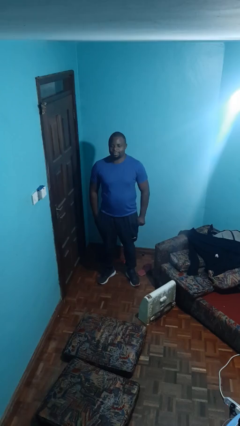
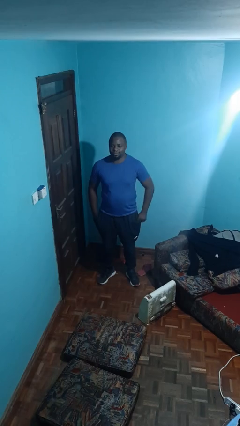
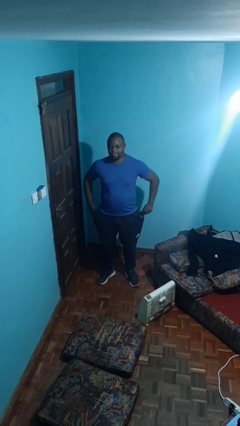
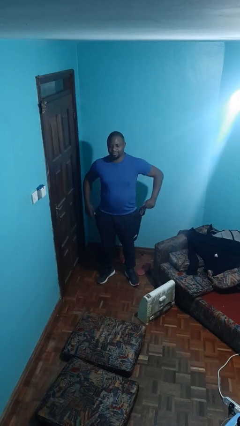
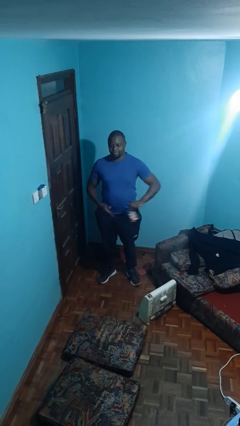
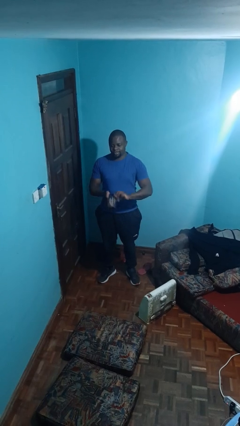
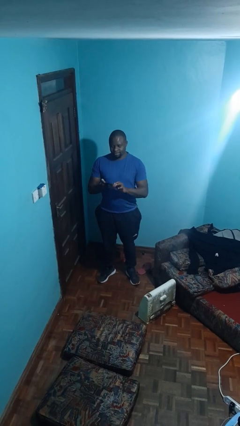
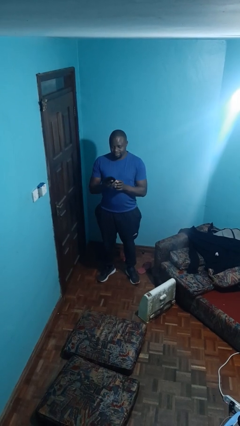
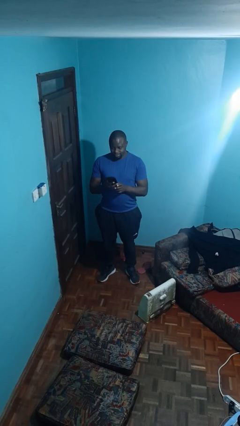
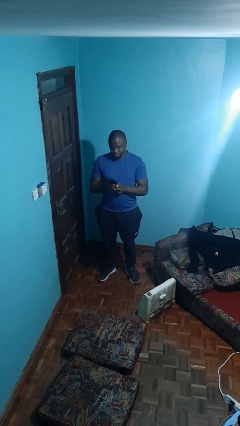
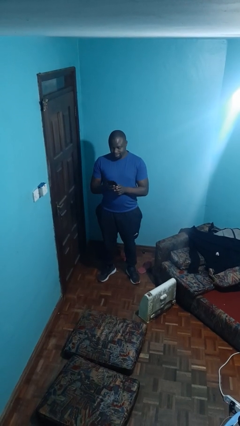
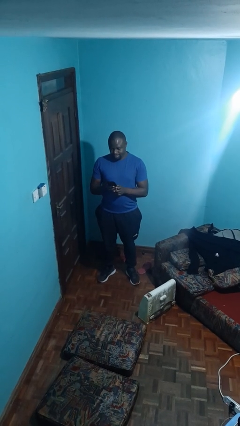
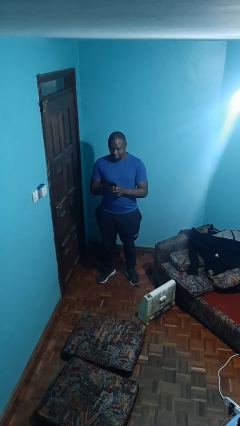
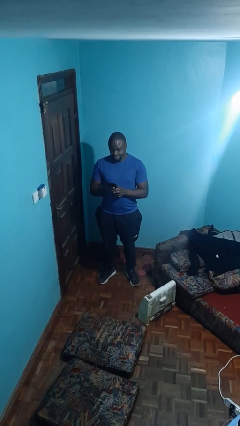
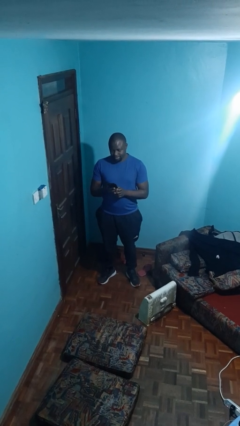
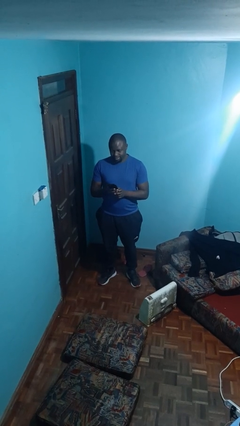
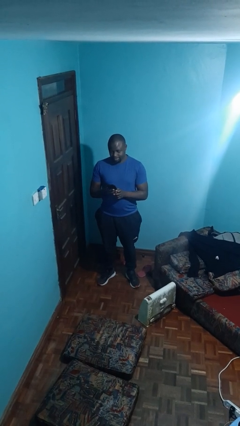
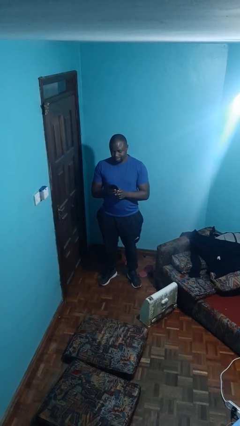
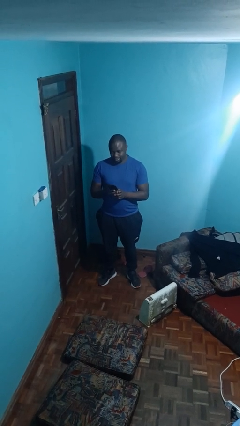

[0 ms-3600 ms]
person takes phone from pocket

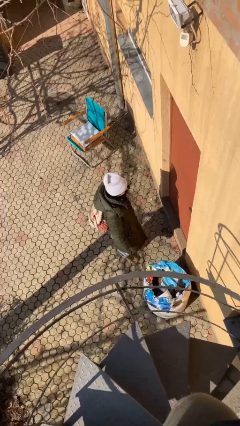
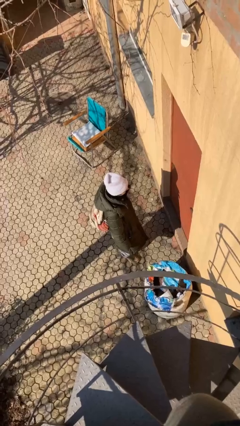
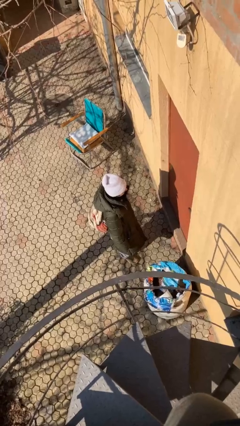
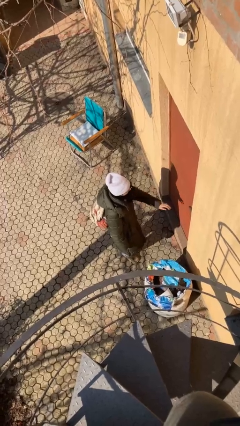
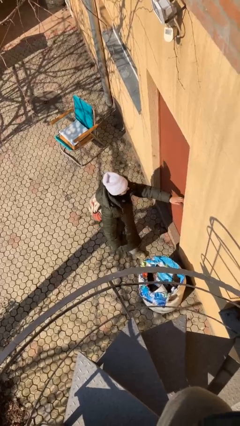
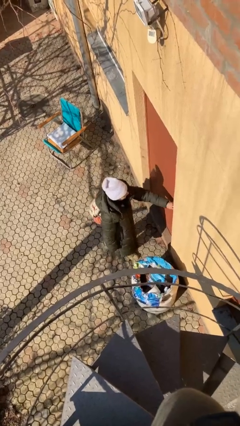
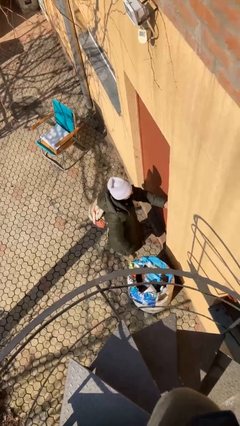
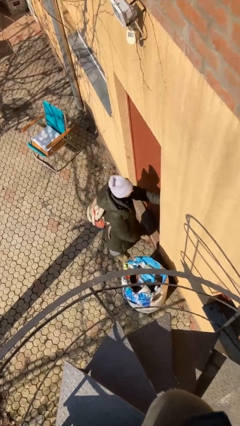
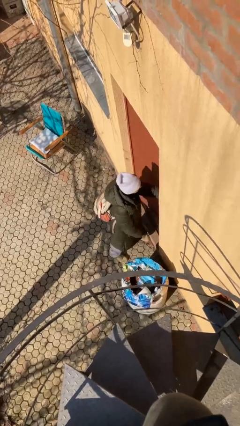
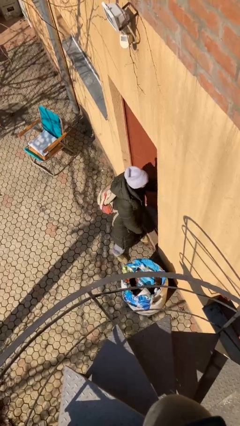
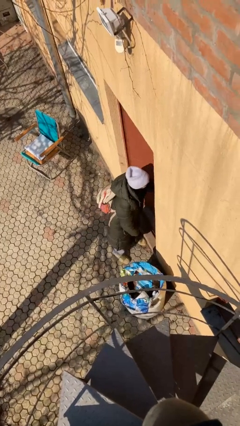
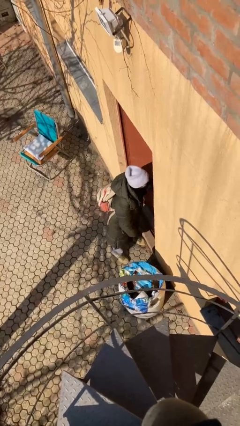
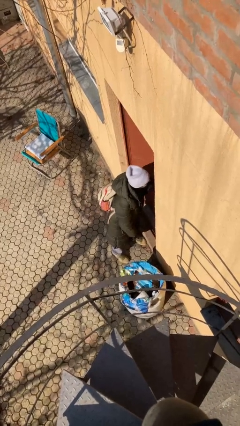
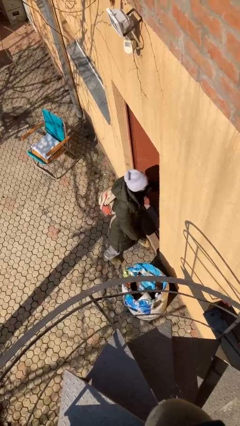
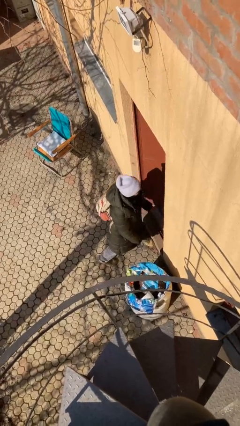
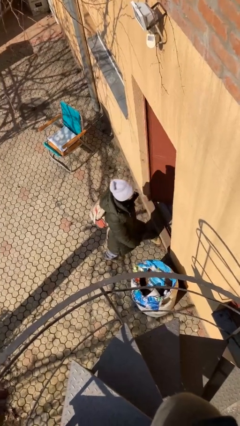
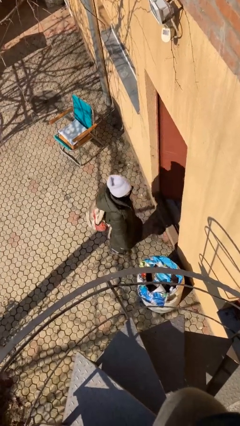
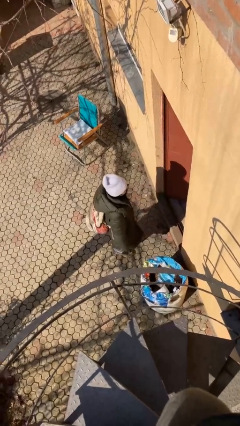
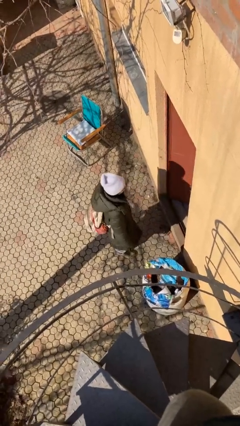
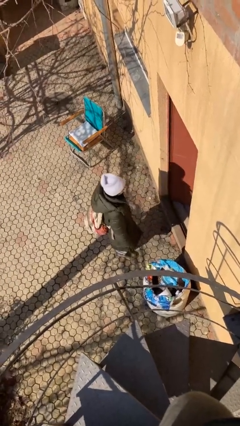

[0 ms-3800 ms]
person opens facility door

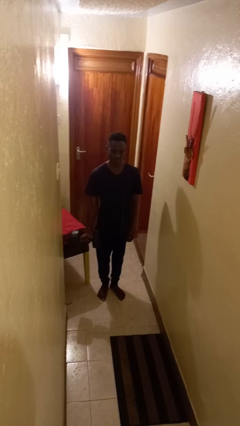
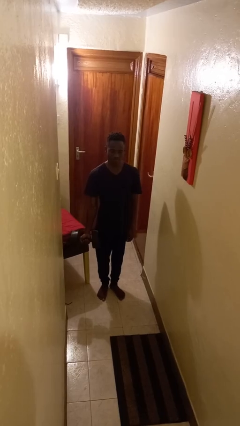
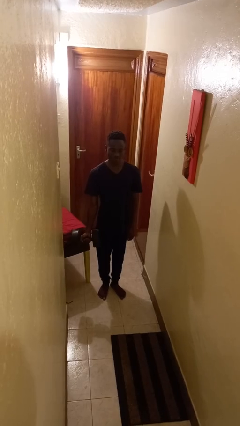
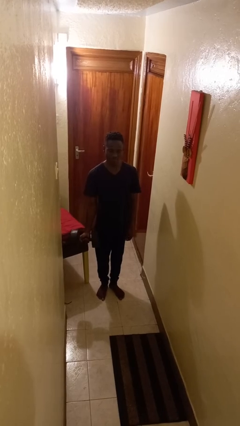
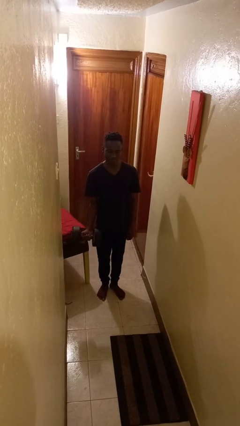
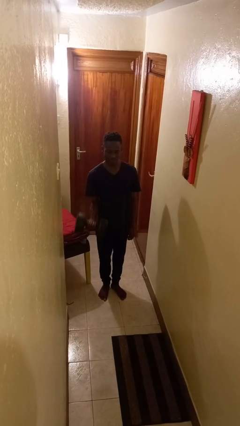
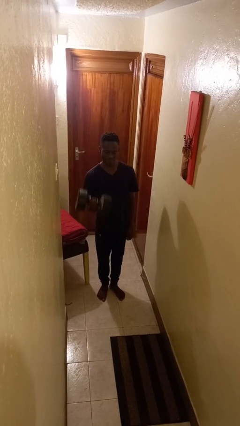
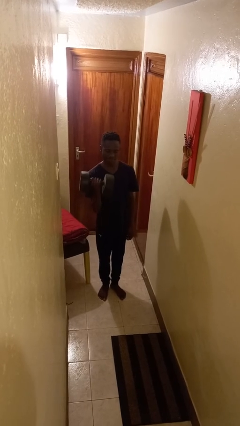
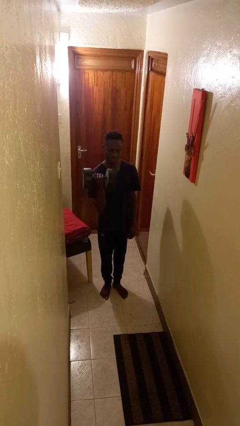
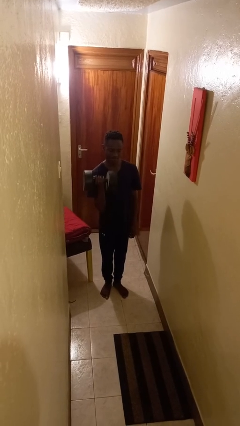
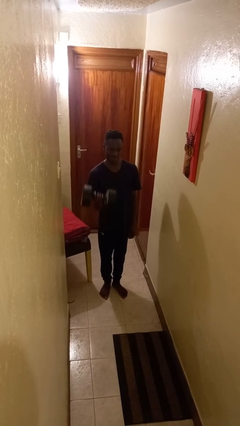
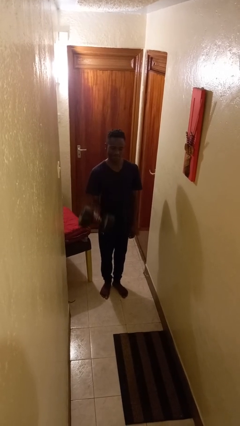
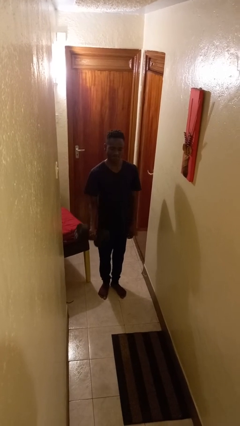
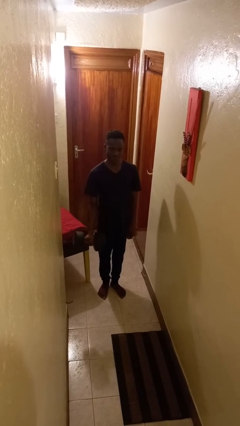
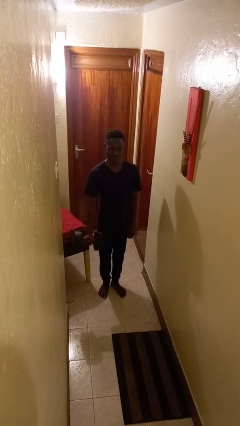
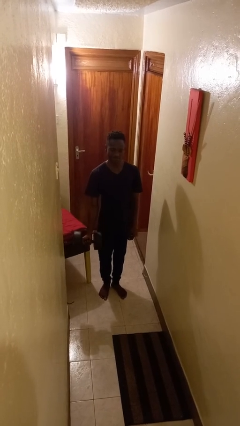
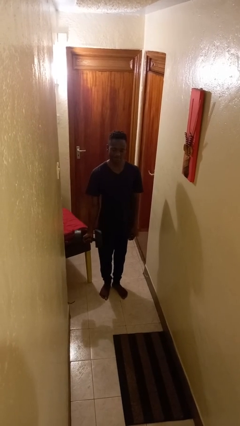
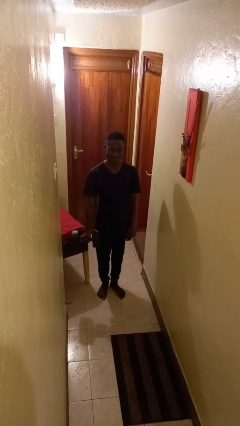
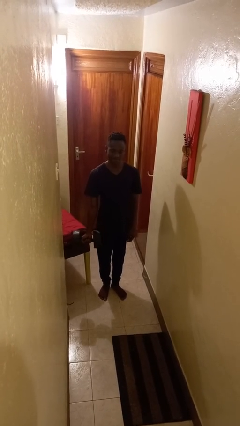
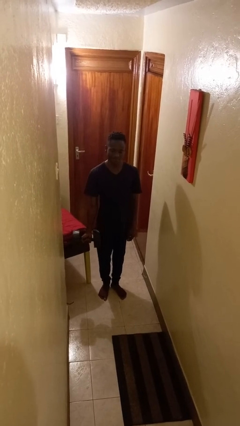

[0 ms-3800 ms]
person lifts dumbbells

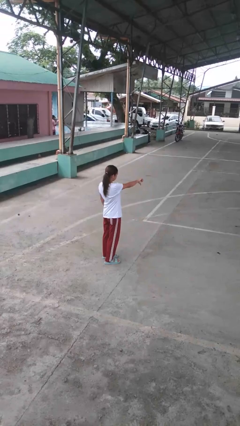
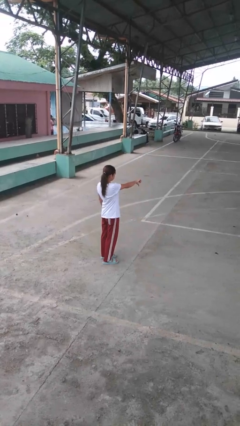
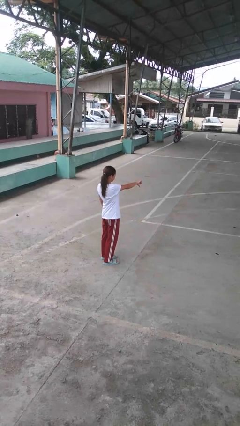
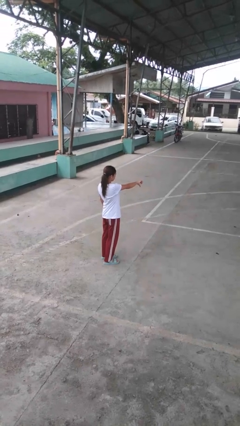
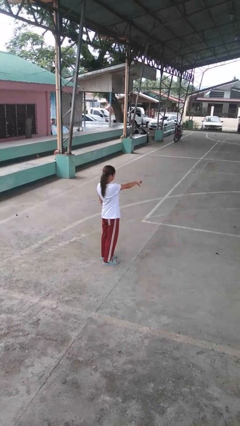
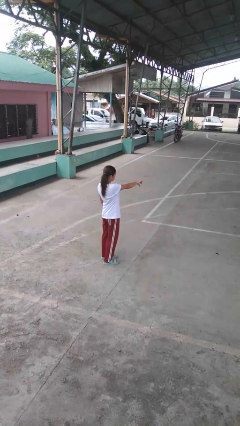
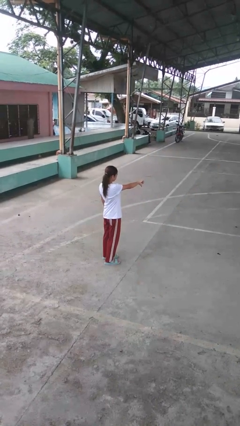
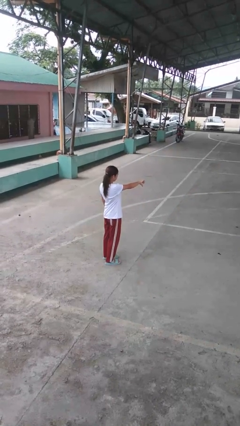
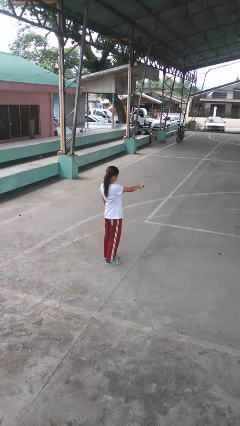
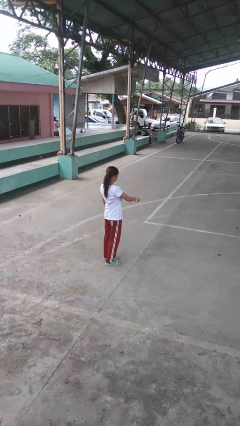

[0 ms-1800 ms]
person gestures thumbs down

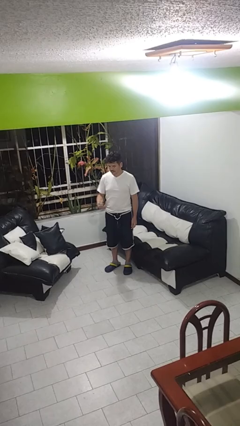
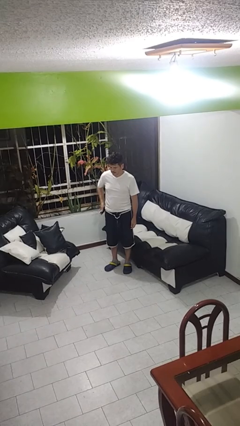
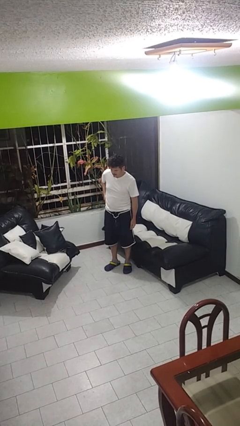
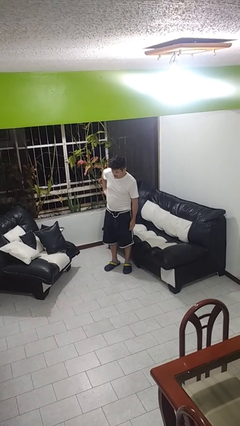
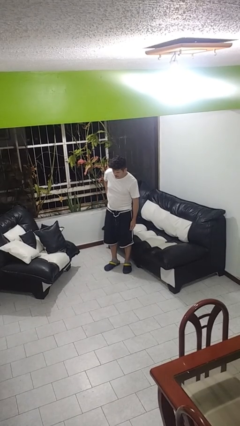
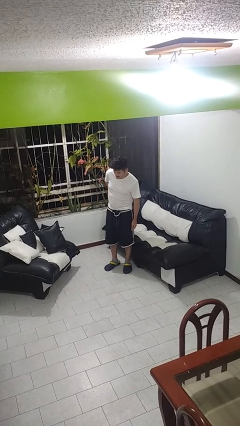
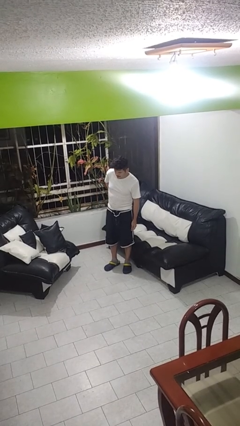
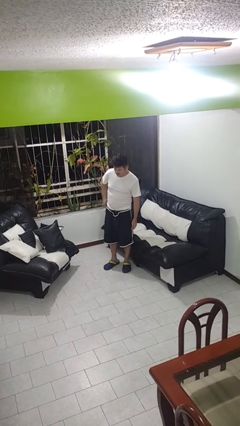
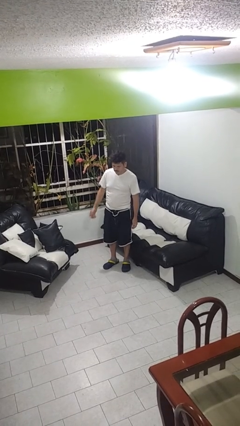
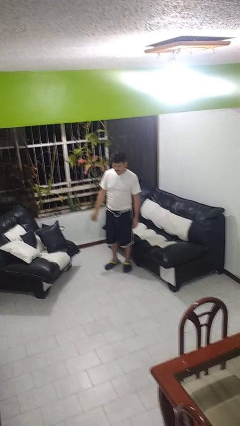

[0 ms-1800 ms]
person puts phone into pocket

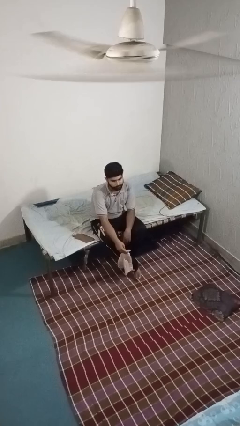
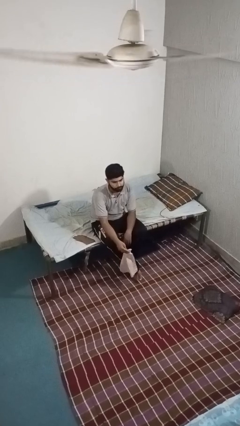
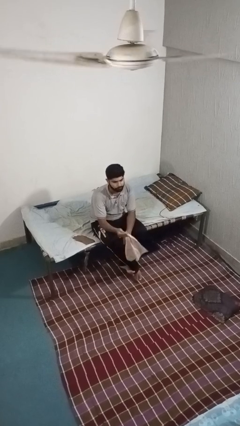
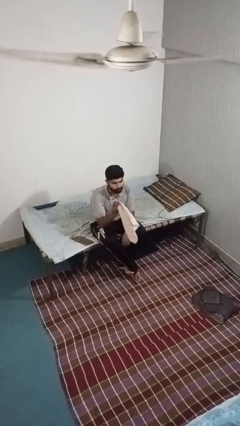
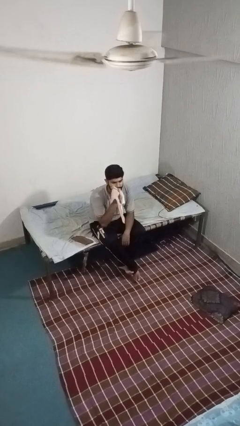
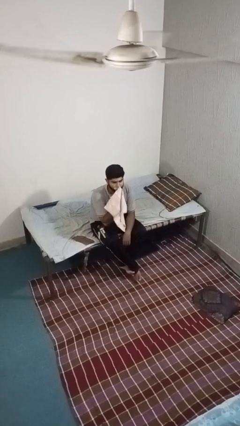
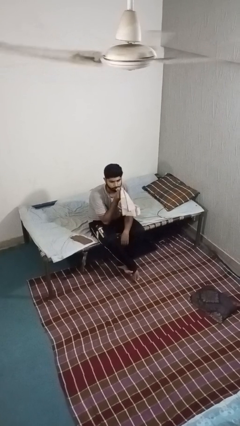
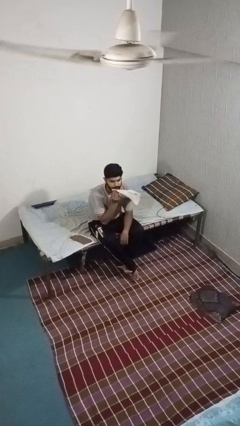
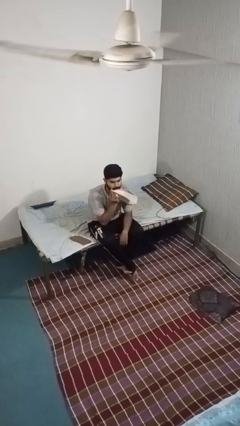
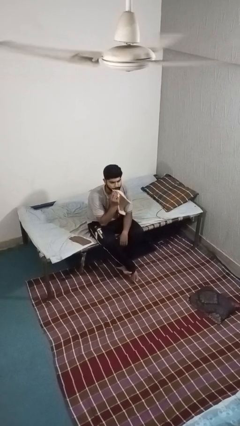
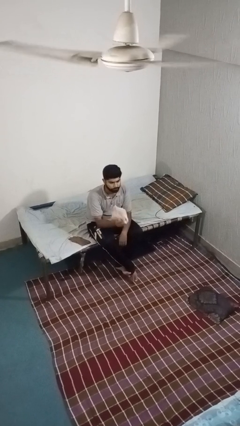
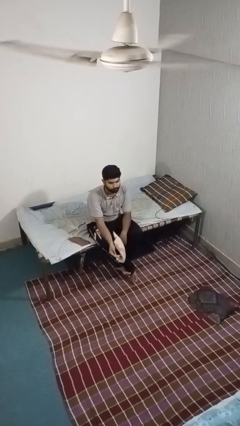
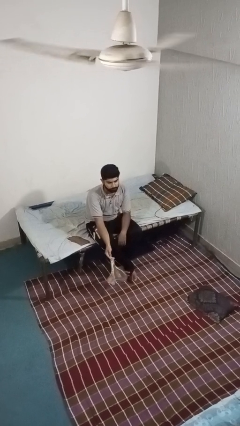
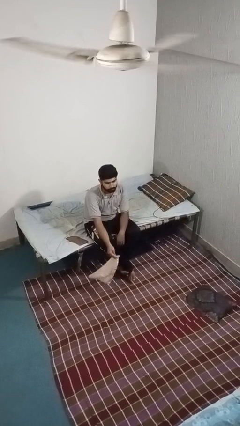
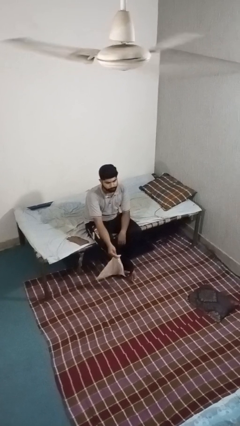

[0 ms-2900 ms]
person wipes mouth with napkin
